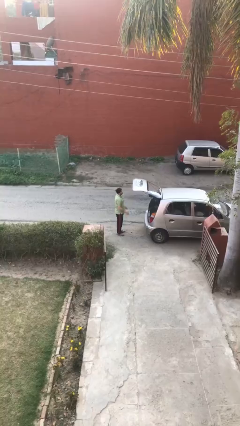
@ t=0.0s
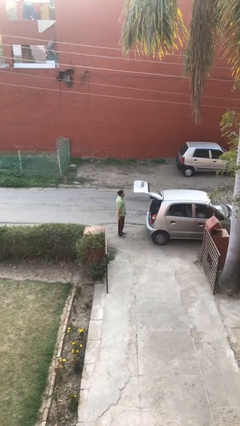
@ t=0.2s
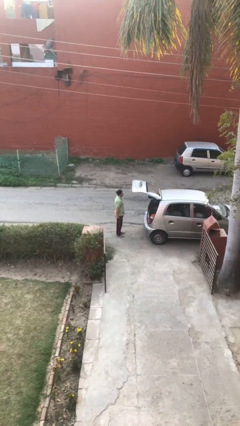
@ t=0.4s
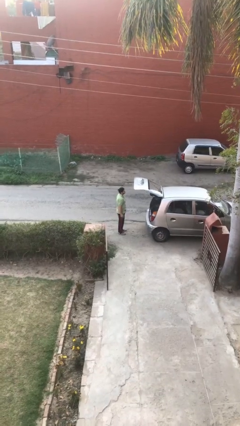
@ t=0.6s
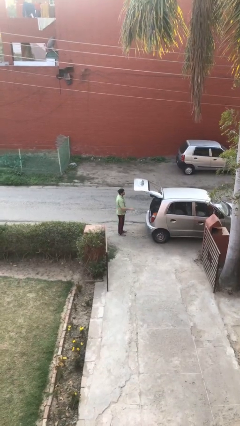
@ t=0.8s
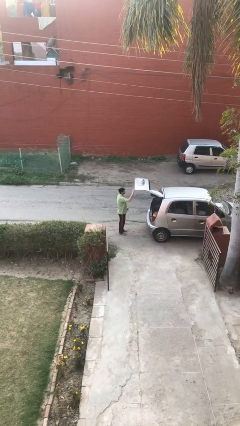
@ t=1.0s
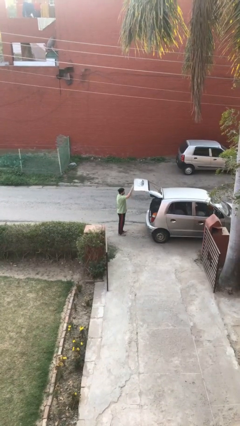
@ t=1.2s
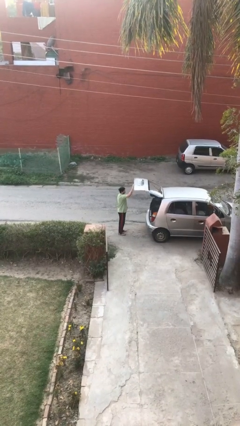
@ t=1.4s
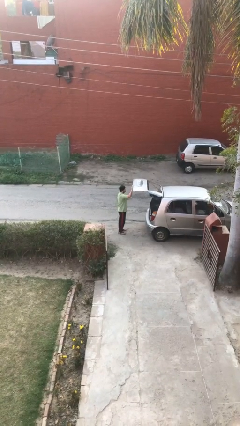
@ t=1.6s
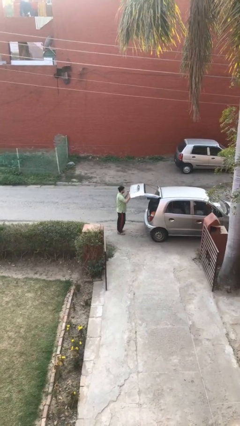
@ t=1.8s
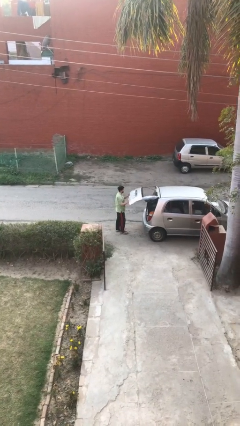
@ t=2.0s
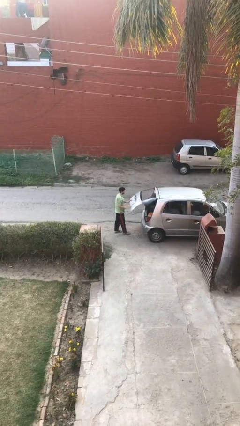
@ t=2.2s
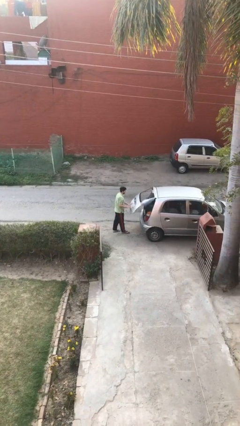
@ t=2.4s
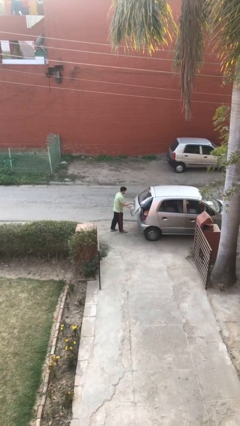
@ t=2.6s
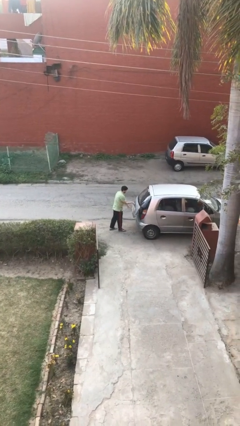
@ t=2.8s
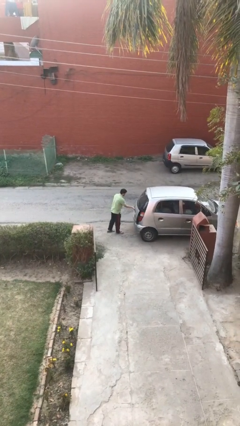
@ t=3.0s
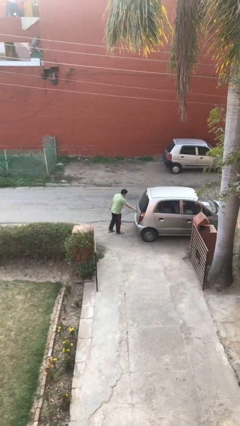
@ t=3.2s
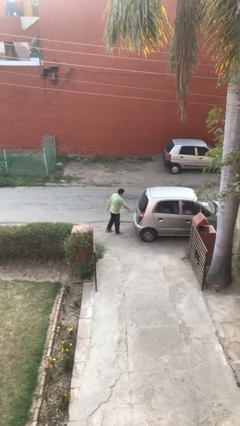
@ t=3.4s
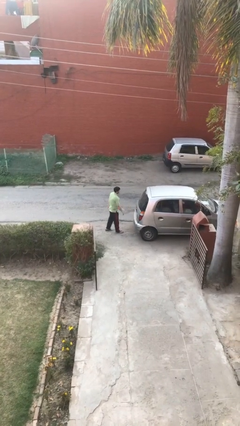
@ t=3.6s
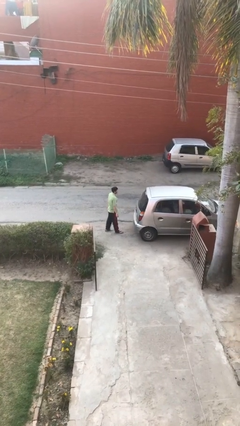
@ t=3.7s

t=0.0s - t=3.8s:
person closes car trunk

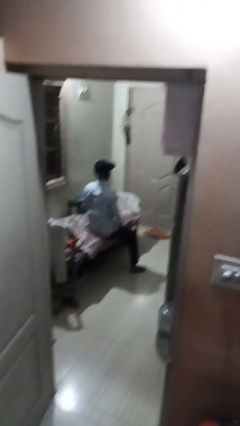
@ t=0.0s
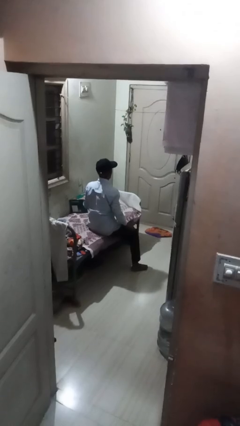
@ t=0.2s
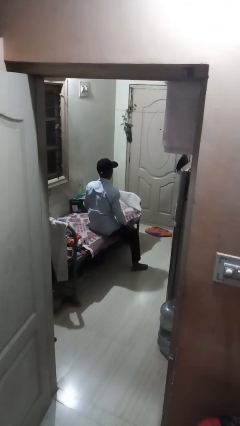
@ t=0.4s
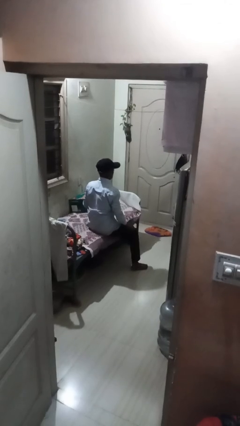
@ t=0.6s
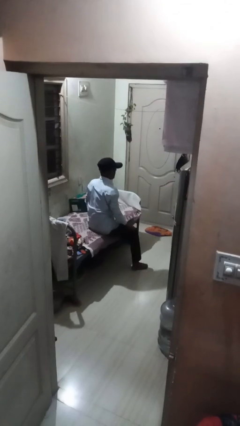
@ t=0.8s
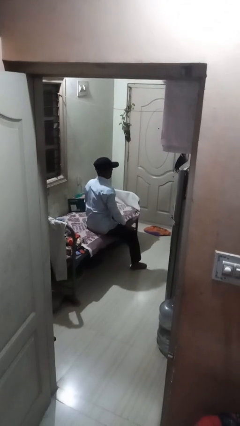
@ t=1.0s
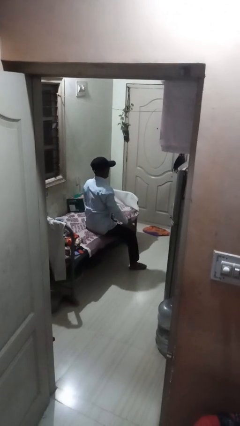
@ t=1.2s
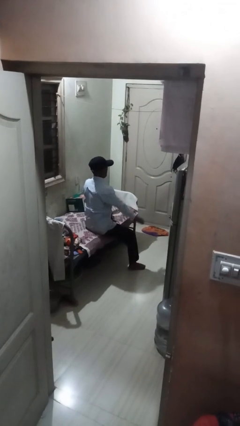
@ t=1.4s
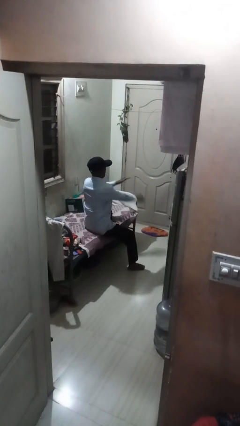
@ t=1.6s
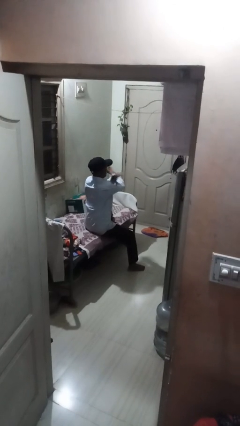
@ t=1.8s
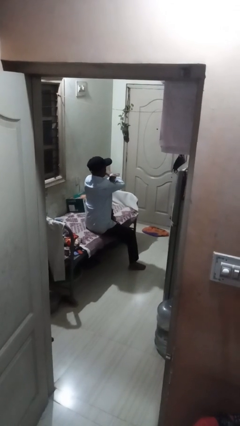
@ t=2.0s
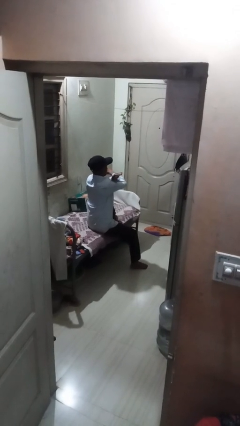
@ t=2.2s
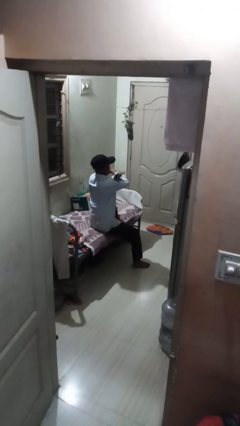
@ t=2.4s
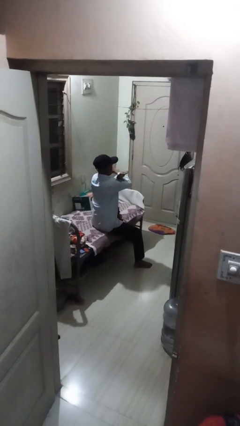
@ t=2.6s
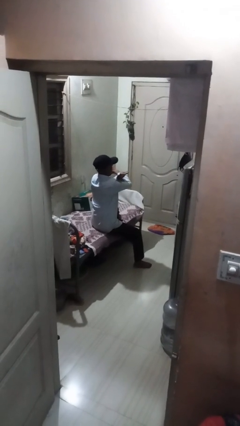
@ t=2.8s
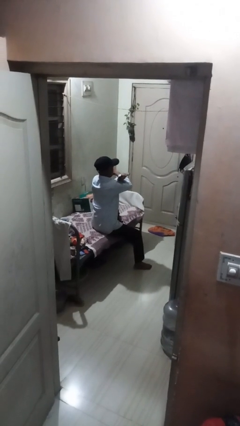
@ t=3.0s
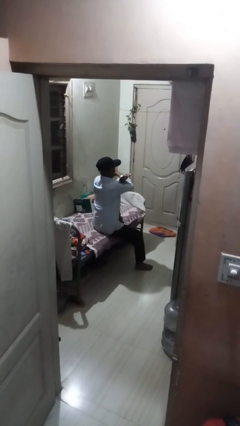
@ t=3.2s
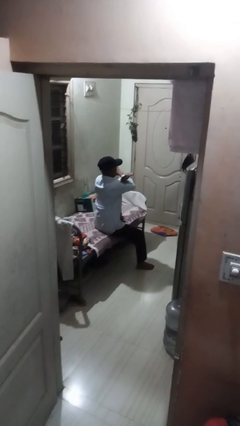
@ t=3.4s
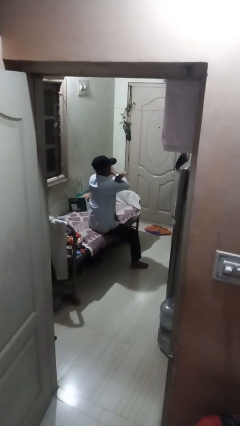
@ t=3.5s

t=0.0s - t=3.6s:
person gestures arms x

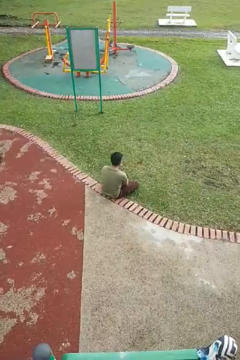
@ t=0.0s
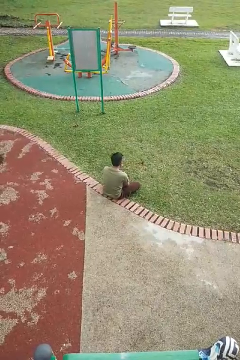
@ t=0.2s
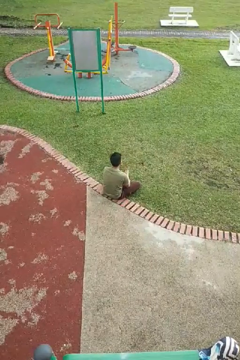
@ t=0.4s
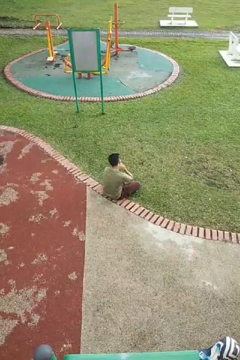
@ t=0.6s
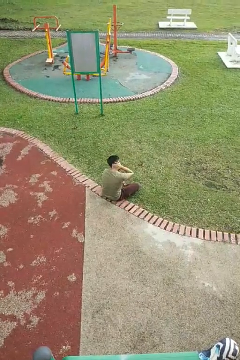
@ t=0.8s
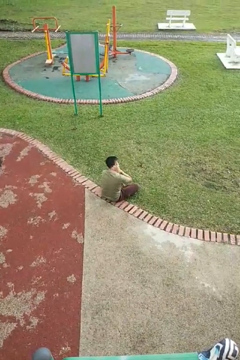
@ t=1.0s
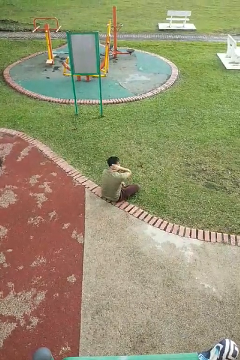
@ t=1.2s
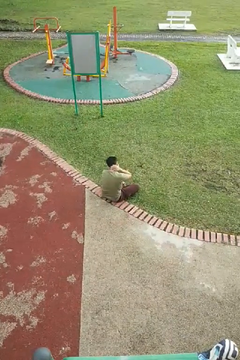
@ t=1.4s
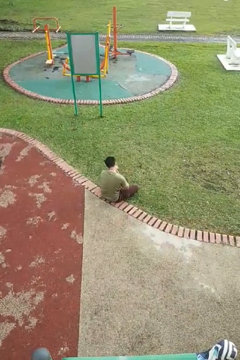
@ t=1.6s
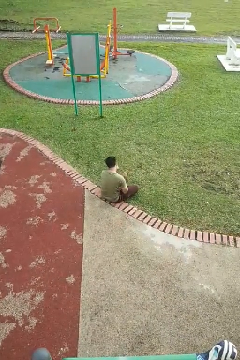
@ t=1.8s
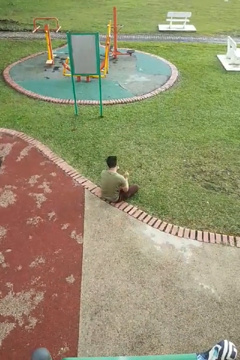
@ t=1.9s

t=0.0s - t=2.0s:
person rubs neck

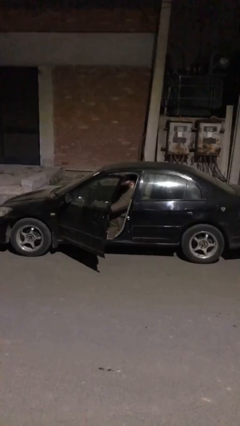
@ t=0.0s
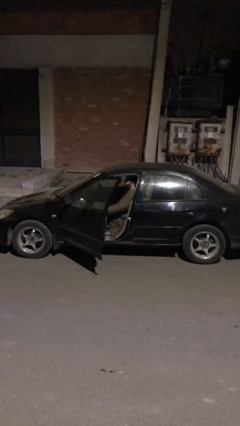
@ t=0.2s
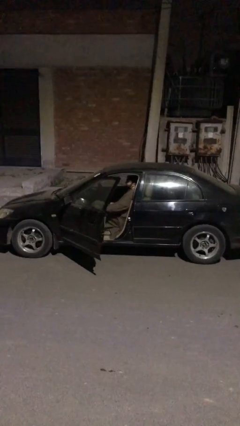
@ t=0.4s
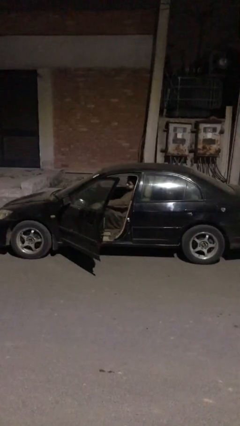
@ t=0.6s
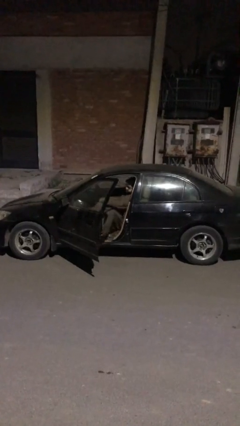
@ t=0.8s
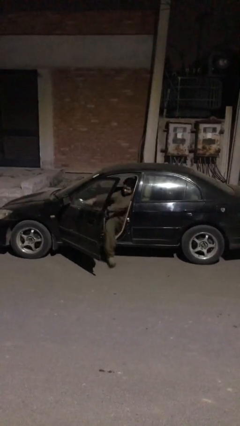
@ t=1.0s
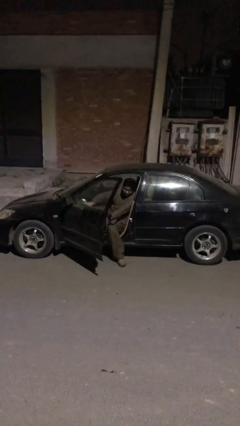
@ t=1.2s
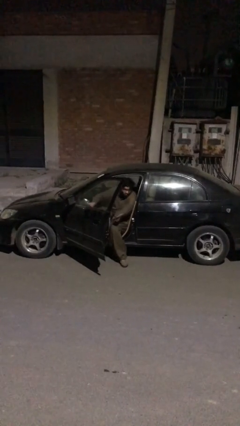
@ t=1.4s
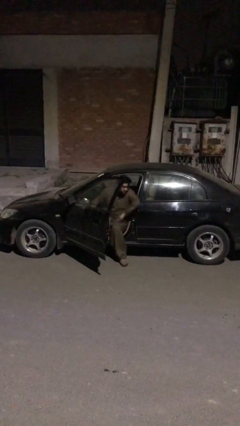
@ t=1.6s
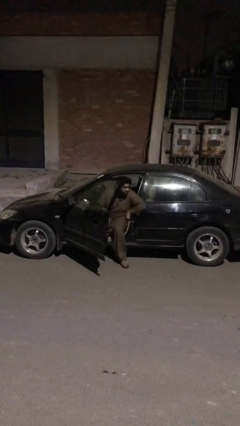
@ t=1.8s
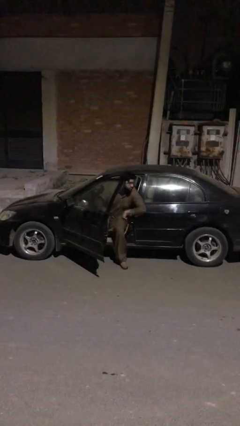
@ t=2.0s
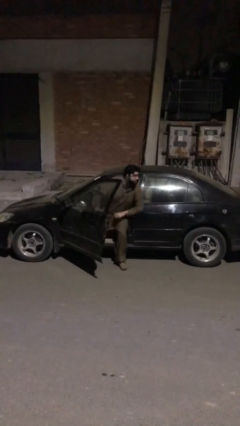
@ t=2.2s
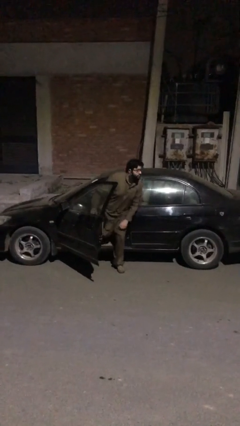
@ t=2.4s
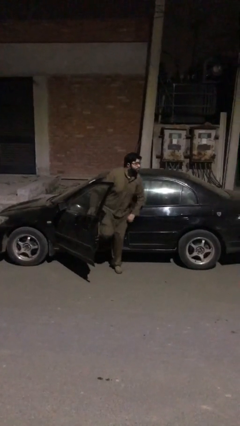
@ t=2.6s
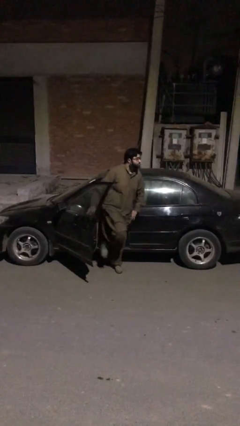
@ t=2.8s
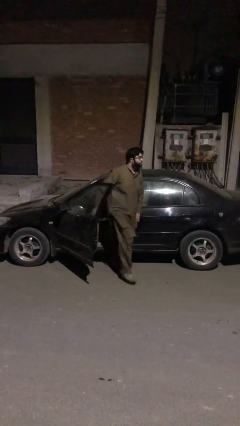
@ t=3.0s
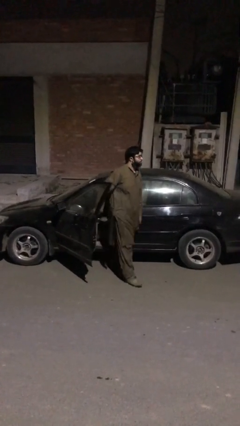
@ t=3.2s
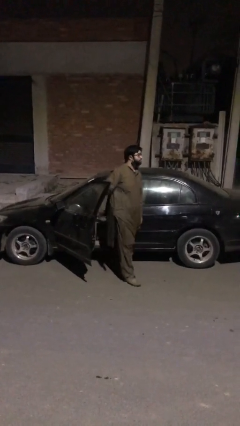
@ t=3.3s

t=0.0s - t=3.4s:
person exits car

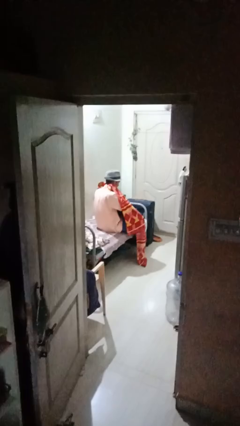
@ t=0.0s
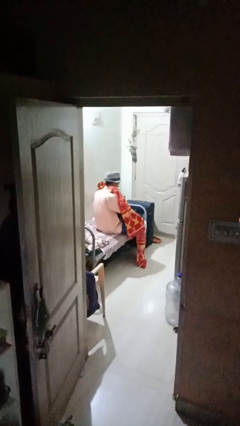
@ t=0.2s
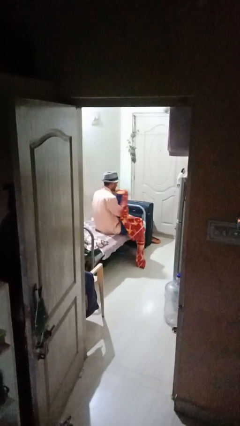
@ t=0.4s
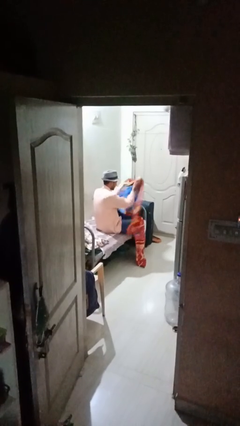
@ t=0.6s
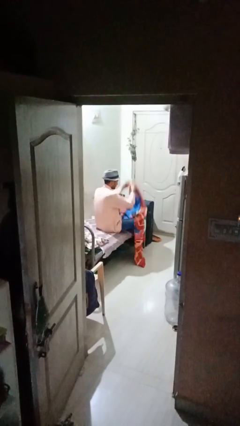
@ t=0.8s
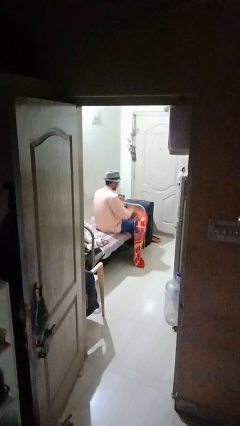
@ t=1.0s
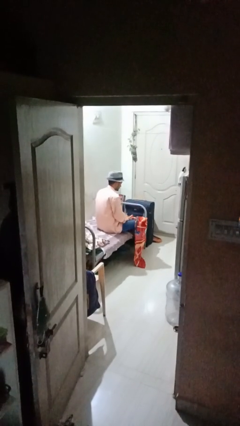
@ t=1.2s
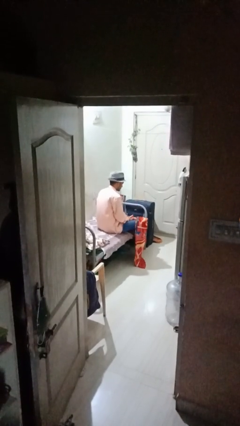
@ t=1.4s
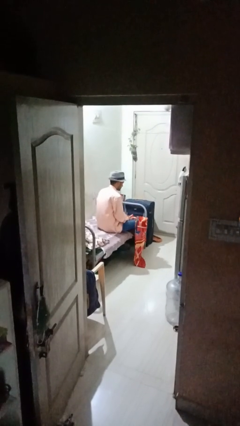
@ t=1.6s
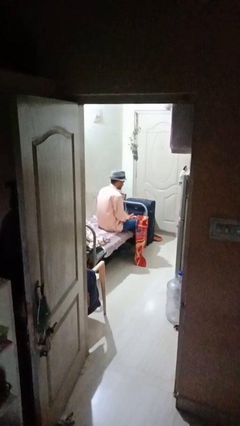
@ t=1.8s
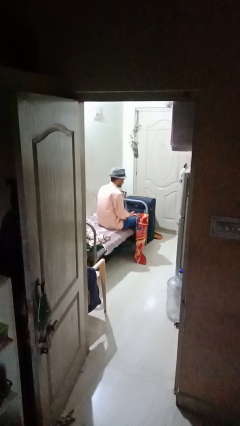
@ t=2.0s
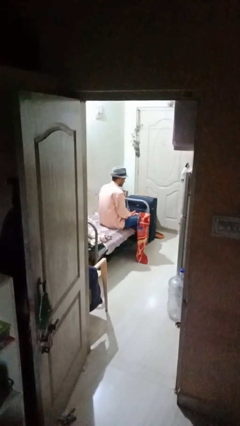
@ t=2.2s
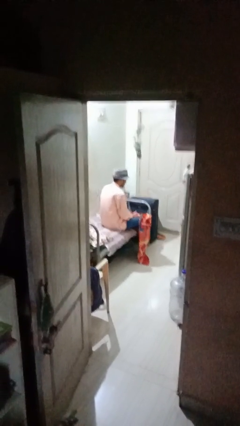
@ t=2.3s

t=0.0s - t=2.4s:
person uncovers with blanket

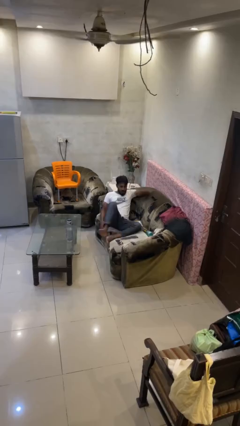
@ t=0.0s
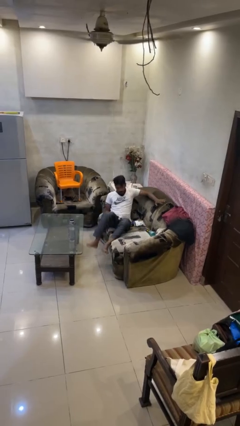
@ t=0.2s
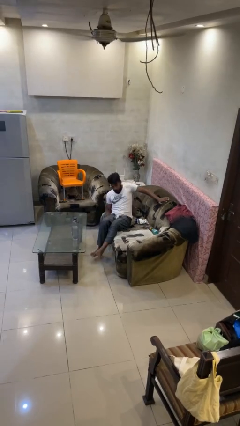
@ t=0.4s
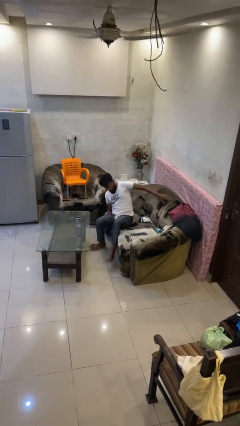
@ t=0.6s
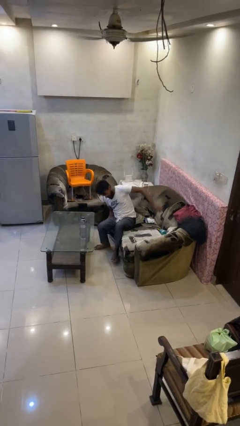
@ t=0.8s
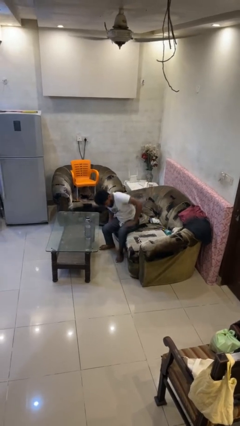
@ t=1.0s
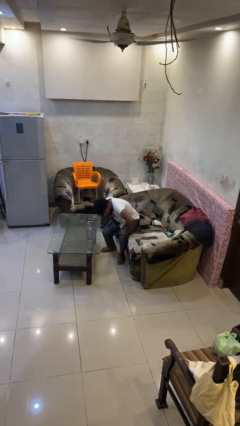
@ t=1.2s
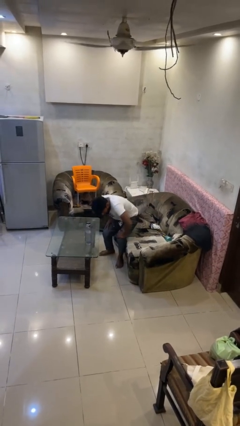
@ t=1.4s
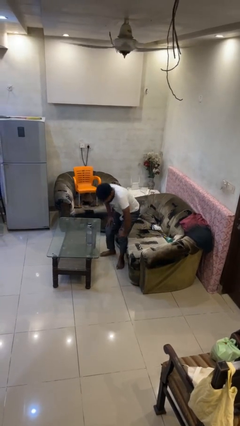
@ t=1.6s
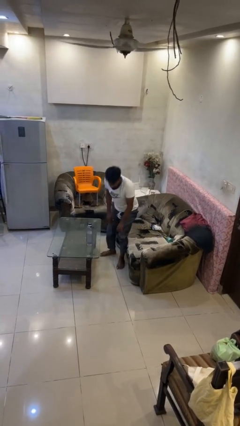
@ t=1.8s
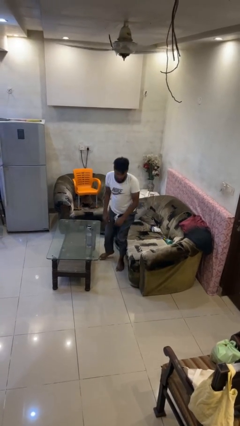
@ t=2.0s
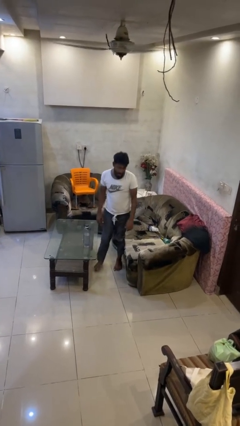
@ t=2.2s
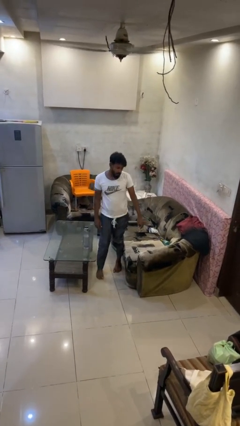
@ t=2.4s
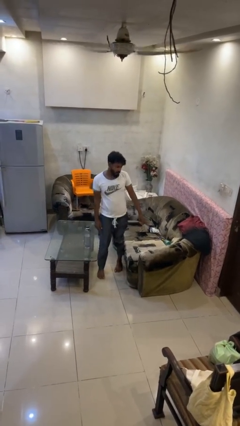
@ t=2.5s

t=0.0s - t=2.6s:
person stands up
